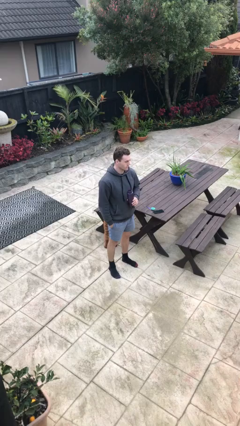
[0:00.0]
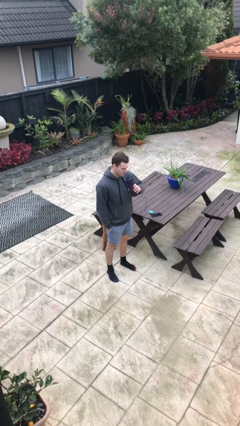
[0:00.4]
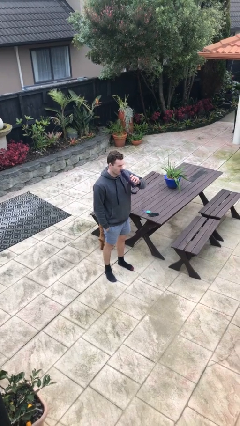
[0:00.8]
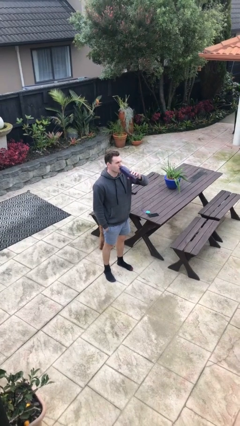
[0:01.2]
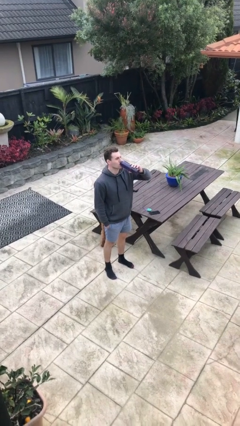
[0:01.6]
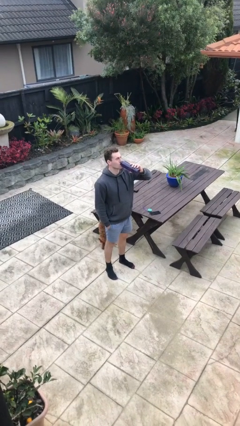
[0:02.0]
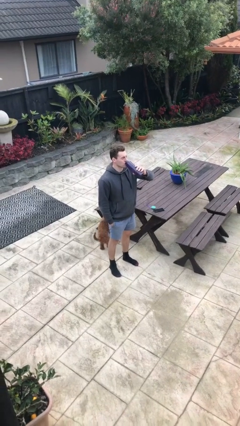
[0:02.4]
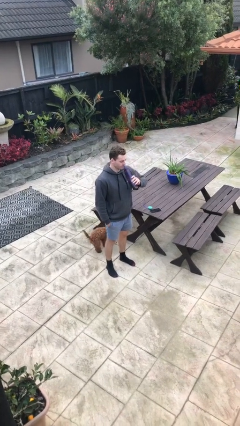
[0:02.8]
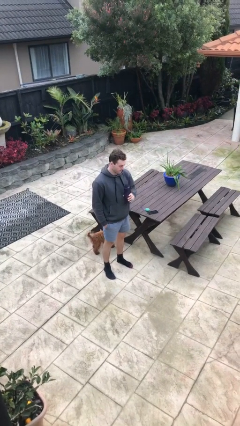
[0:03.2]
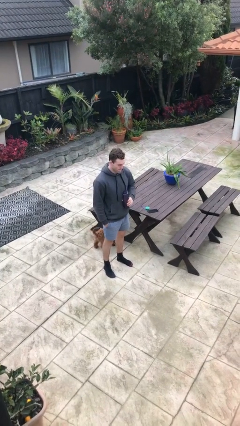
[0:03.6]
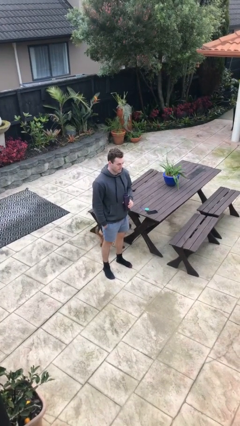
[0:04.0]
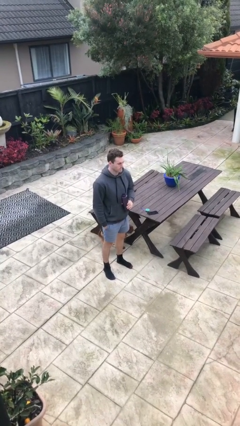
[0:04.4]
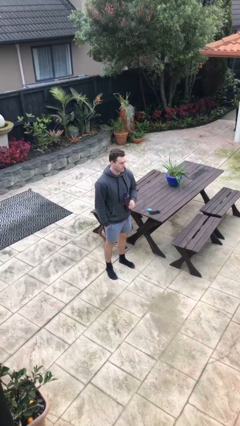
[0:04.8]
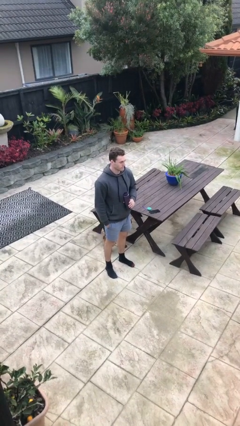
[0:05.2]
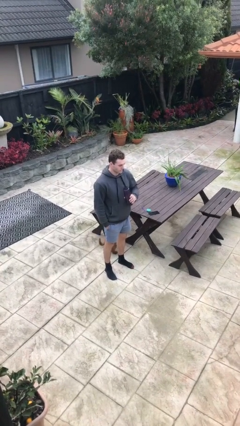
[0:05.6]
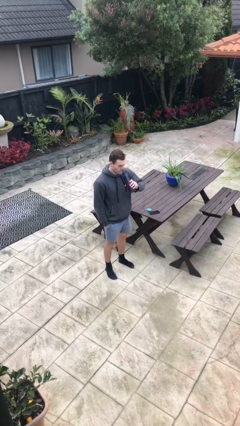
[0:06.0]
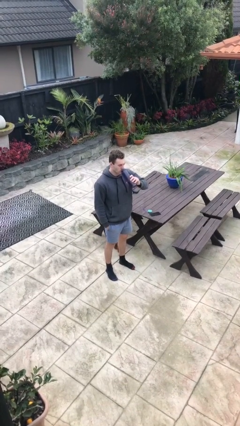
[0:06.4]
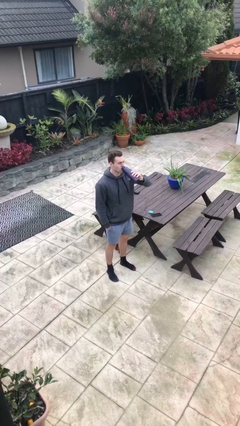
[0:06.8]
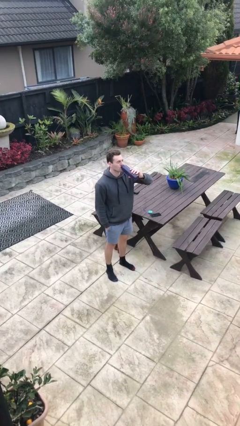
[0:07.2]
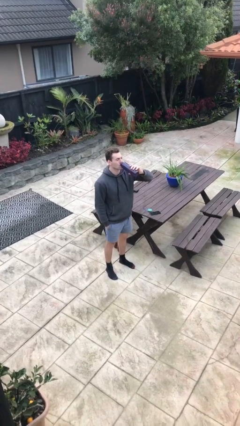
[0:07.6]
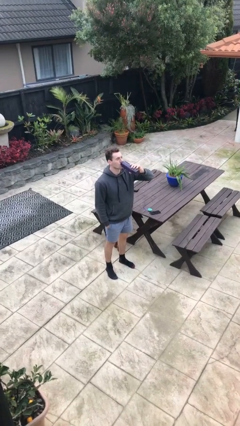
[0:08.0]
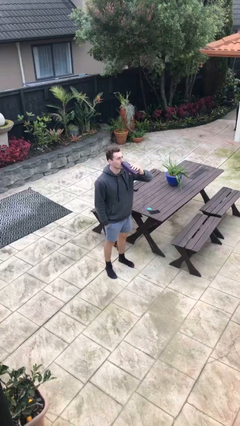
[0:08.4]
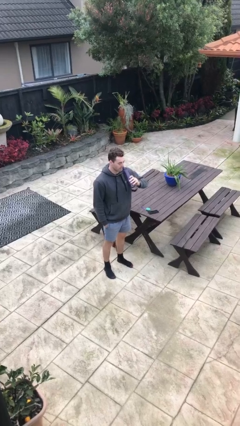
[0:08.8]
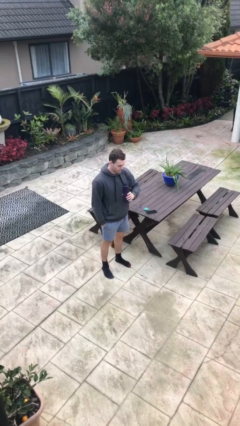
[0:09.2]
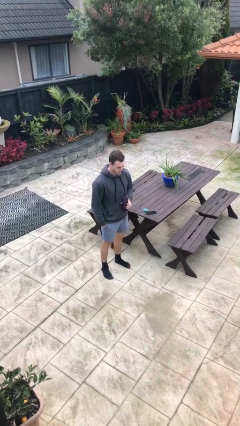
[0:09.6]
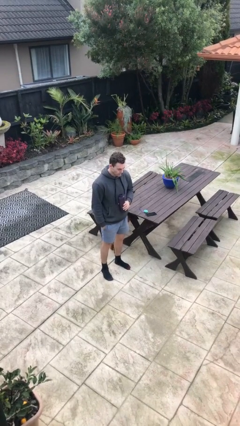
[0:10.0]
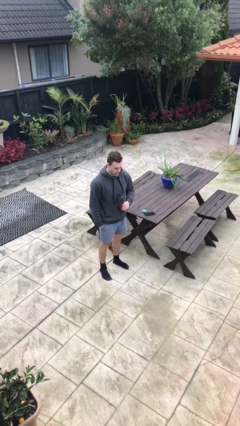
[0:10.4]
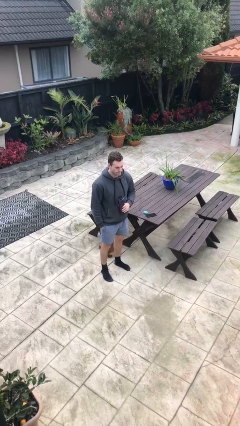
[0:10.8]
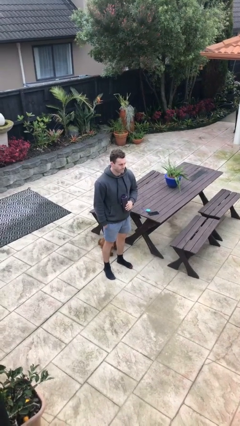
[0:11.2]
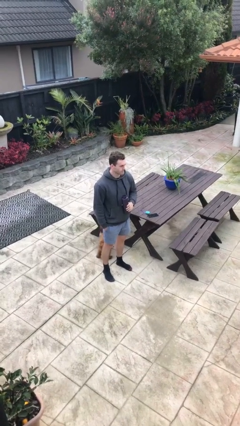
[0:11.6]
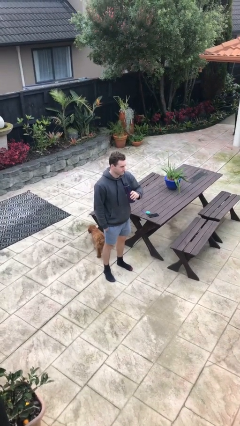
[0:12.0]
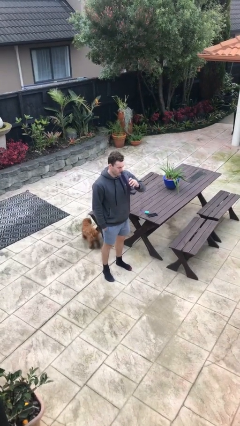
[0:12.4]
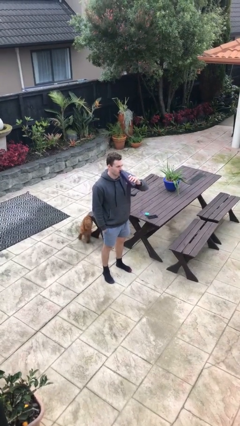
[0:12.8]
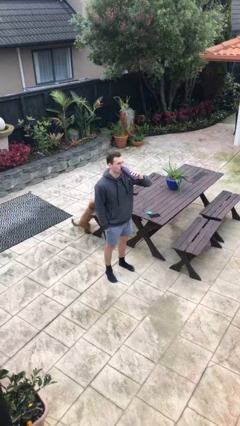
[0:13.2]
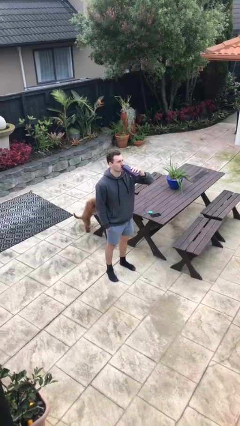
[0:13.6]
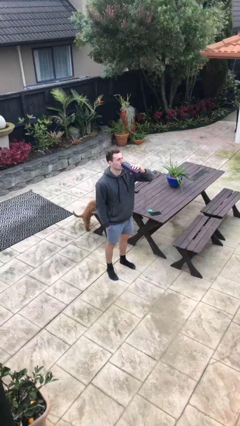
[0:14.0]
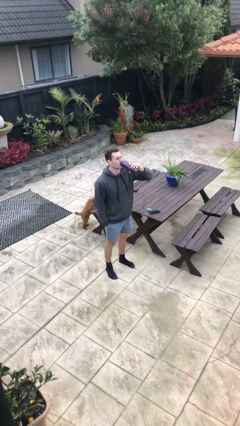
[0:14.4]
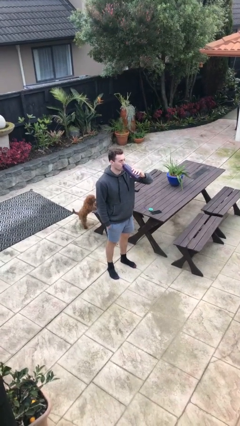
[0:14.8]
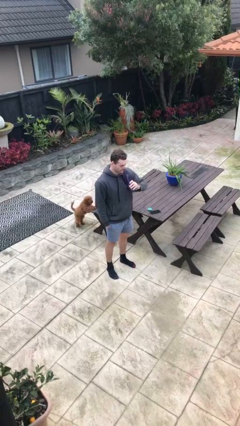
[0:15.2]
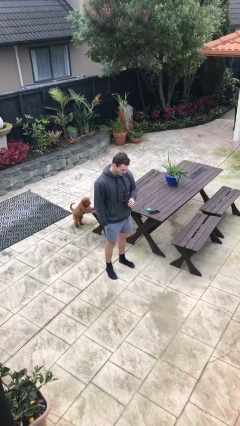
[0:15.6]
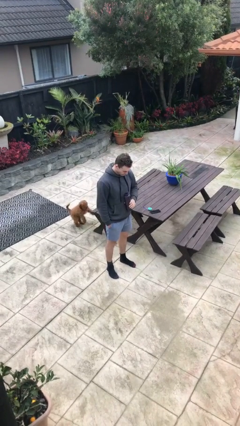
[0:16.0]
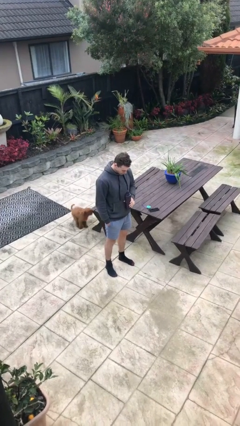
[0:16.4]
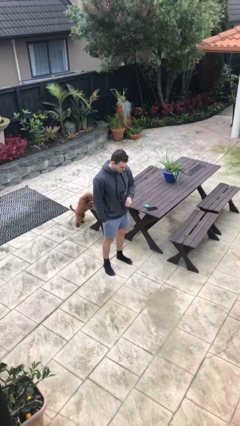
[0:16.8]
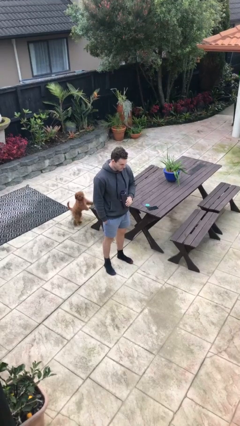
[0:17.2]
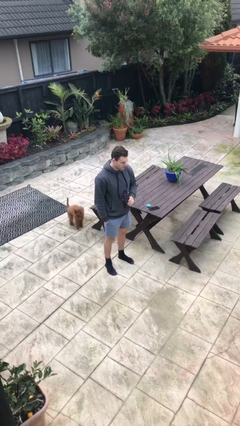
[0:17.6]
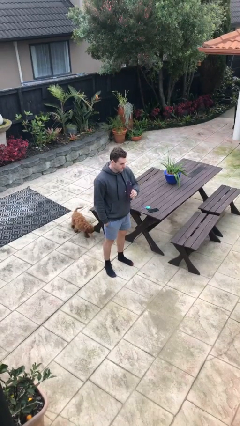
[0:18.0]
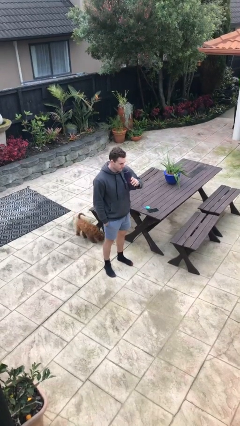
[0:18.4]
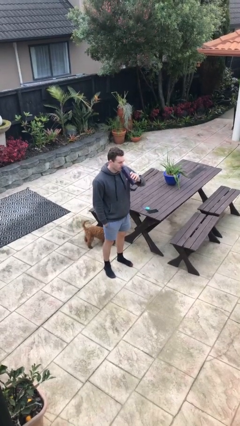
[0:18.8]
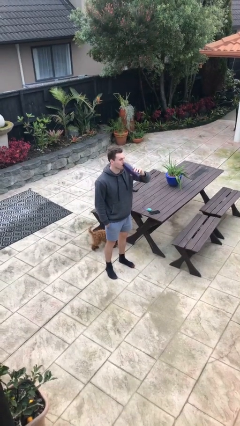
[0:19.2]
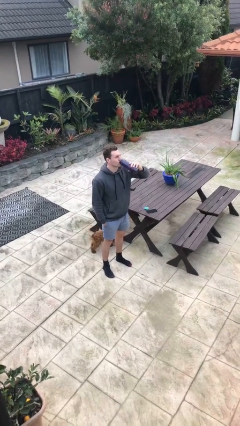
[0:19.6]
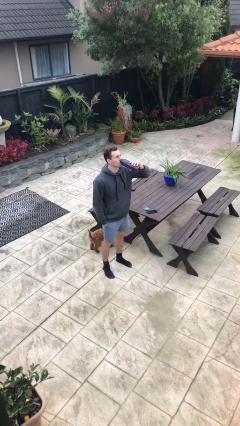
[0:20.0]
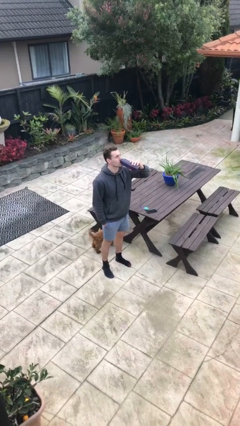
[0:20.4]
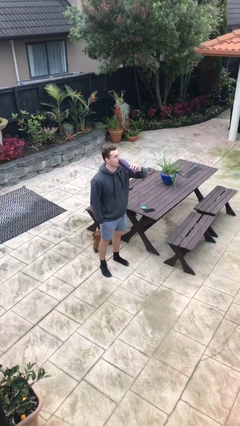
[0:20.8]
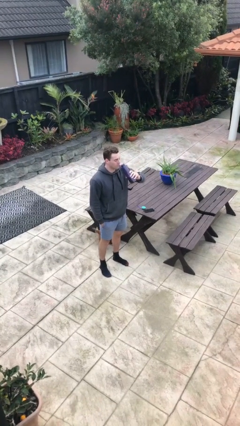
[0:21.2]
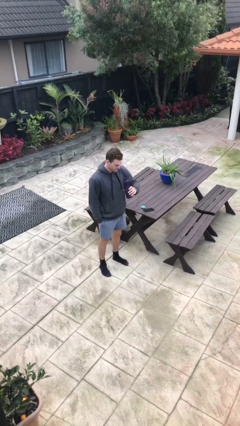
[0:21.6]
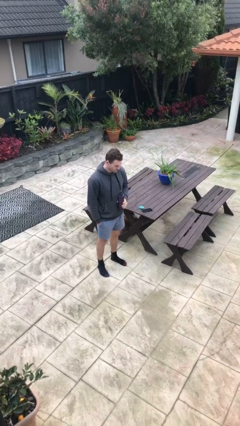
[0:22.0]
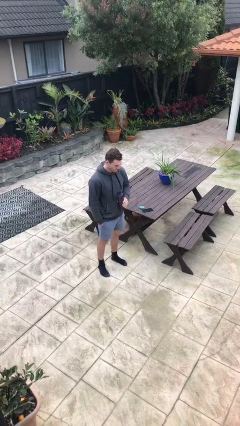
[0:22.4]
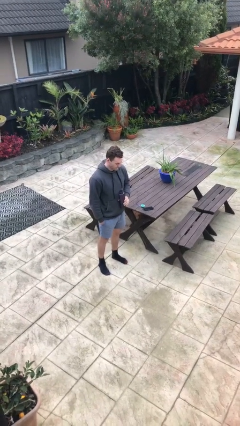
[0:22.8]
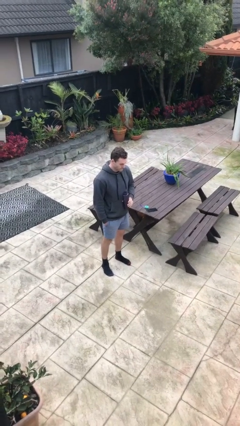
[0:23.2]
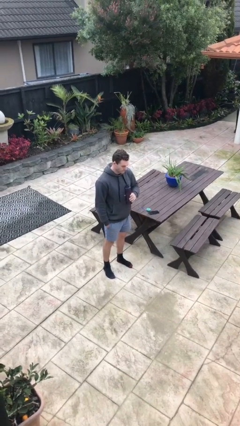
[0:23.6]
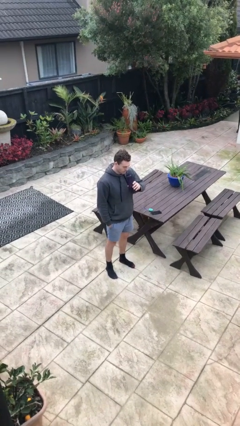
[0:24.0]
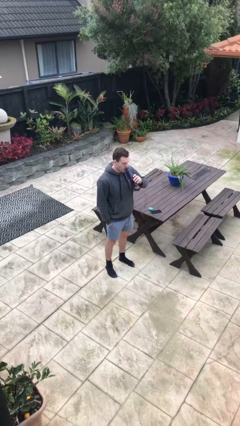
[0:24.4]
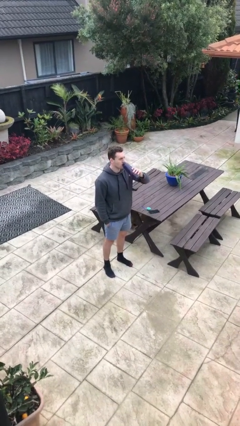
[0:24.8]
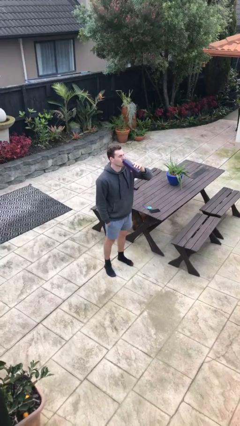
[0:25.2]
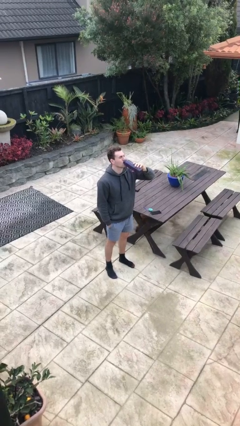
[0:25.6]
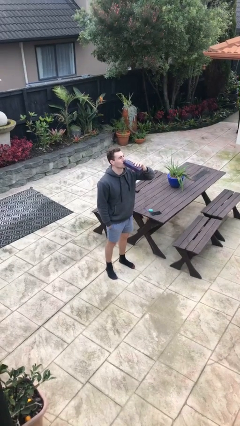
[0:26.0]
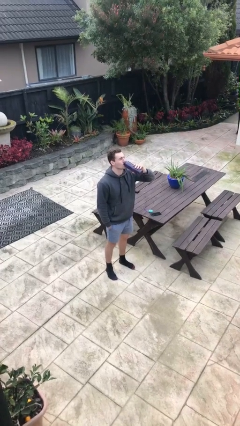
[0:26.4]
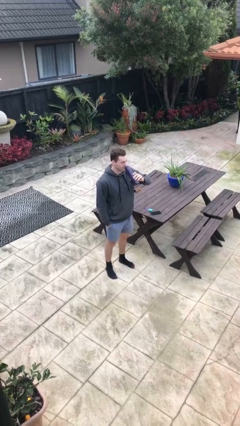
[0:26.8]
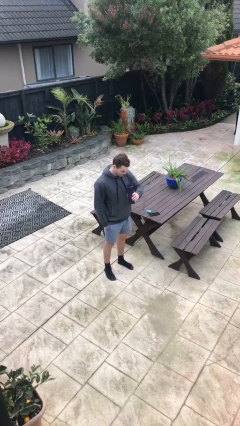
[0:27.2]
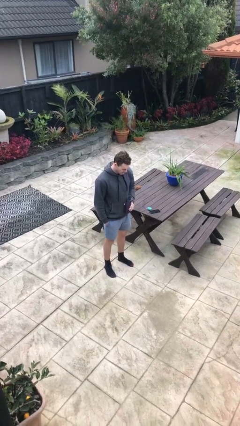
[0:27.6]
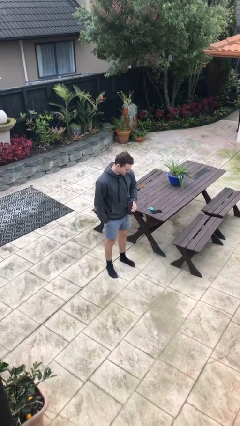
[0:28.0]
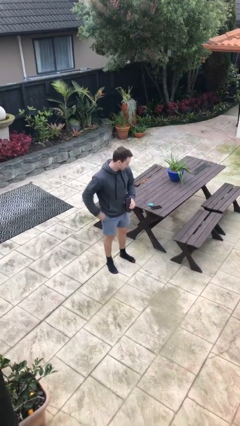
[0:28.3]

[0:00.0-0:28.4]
person drinks from bottle

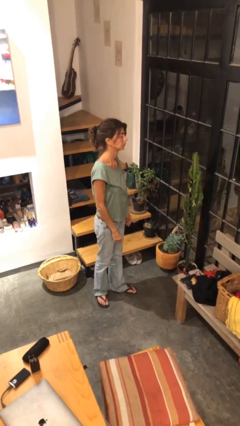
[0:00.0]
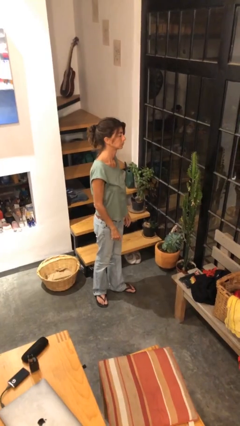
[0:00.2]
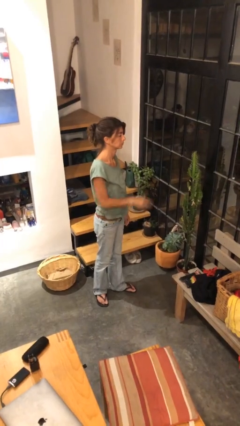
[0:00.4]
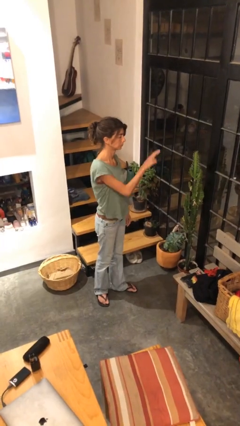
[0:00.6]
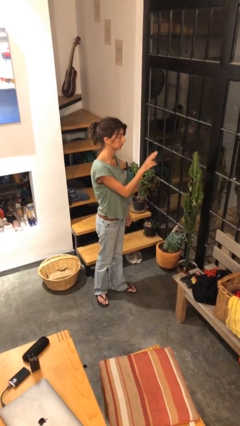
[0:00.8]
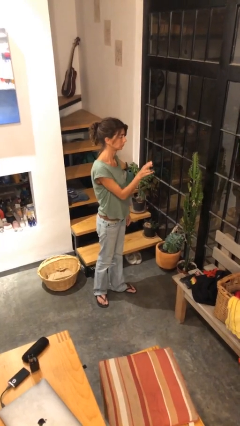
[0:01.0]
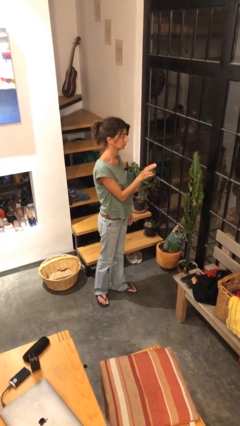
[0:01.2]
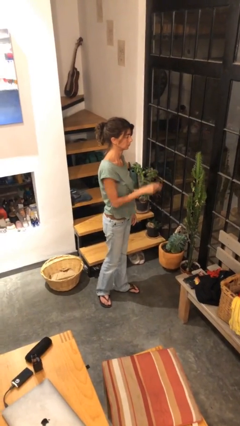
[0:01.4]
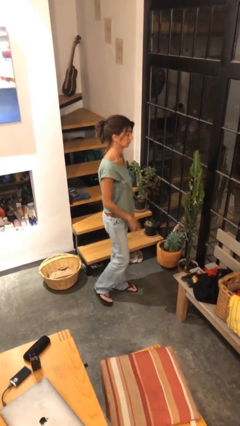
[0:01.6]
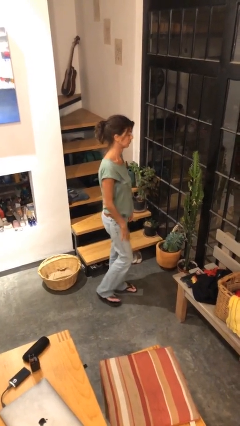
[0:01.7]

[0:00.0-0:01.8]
person gestures swipe right

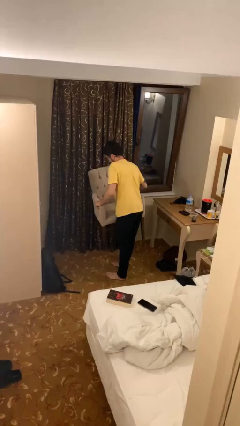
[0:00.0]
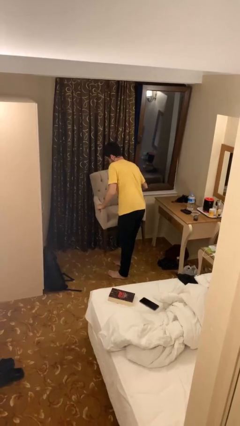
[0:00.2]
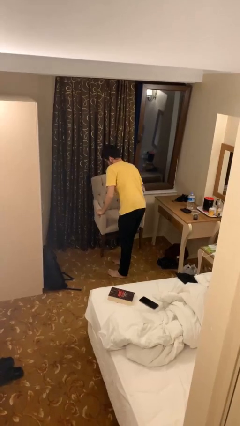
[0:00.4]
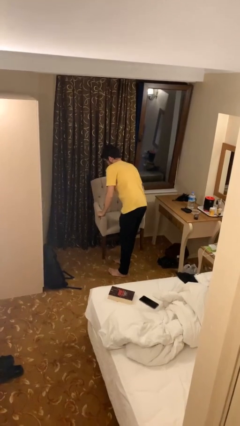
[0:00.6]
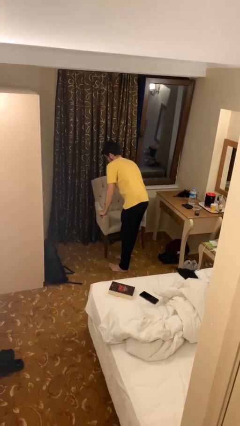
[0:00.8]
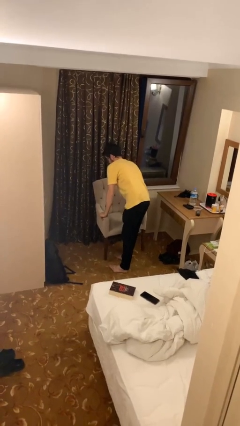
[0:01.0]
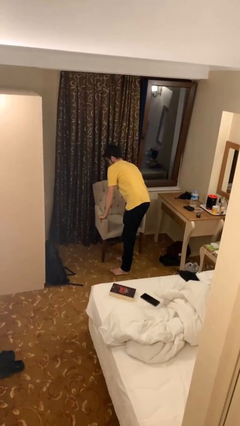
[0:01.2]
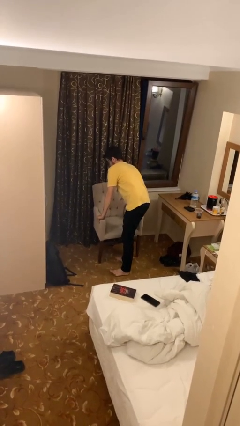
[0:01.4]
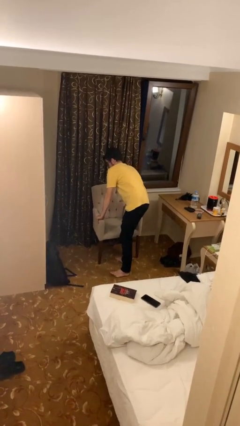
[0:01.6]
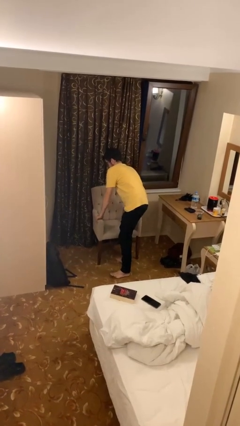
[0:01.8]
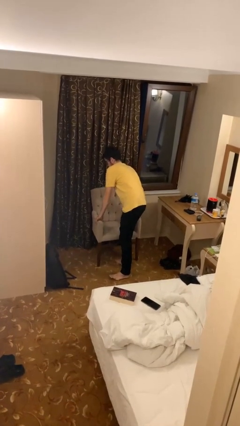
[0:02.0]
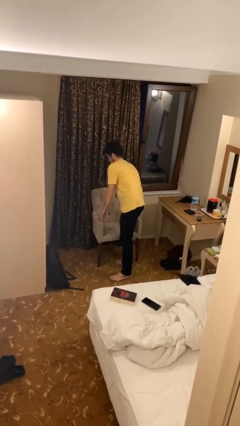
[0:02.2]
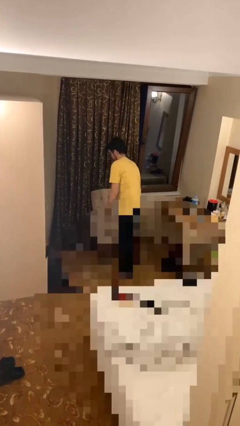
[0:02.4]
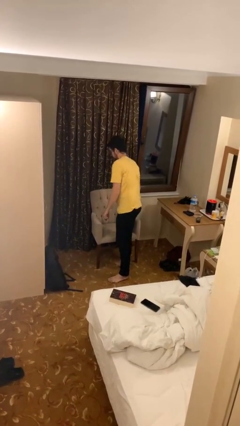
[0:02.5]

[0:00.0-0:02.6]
person puts down object on floor
